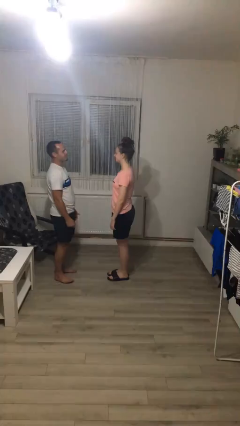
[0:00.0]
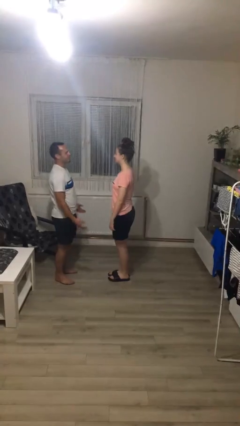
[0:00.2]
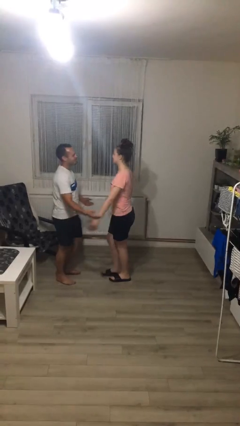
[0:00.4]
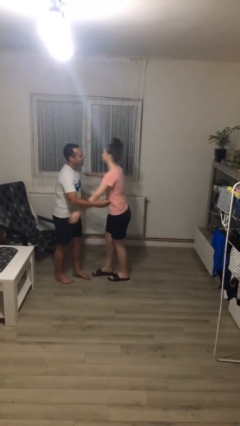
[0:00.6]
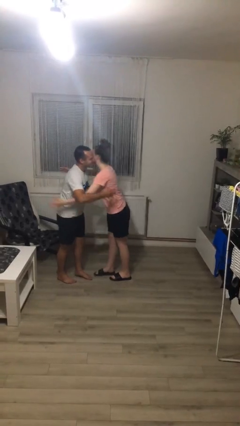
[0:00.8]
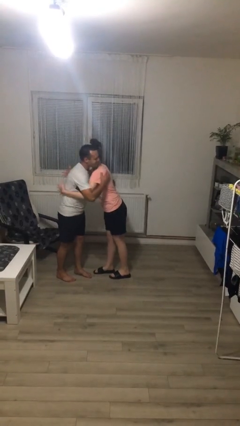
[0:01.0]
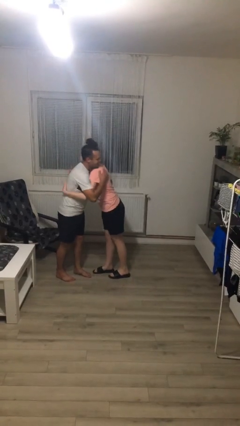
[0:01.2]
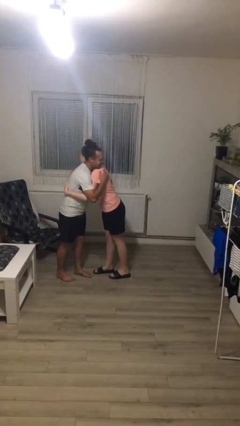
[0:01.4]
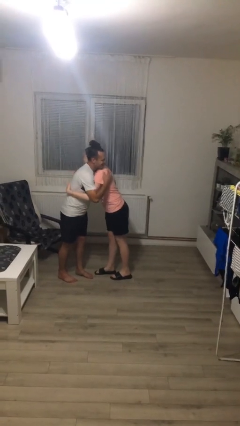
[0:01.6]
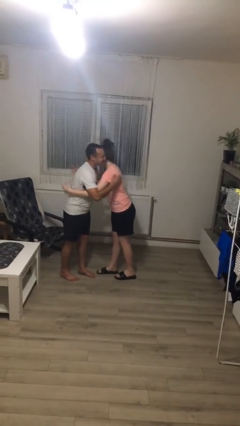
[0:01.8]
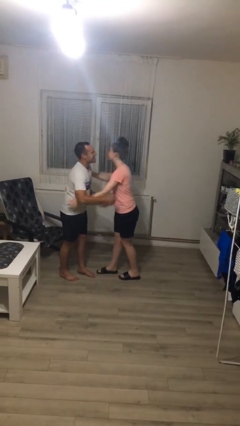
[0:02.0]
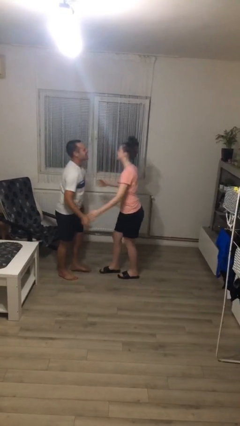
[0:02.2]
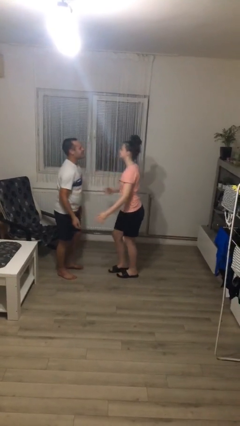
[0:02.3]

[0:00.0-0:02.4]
person embraces person

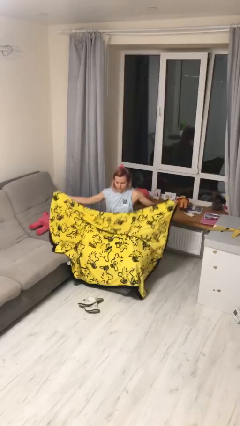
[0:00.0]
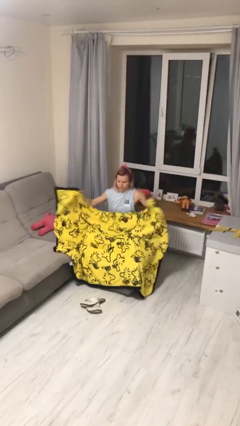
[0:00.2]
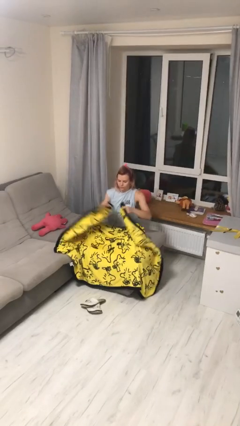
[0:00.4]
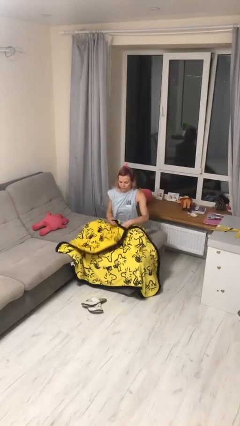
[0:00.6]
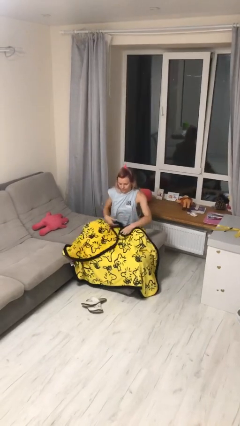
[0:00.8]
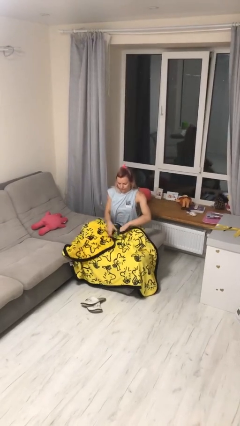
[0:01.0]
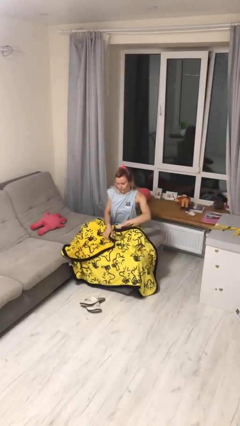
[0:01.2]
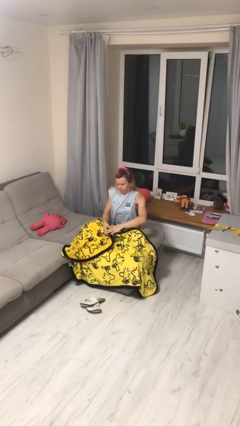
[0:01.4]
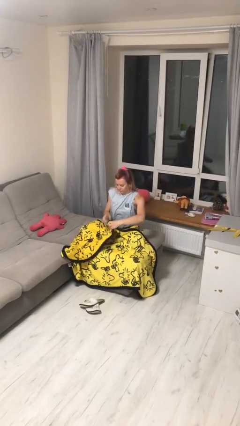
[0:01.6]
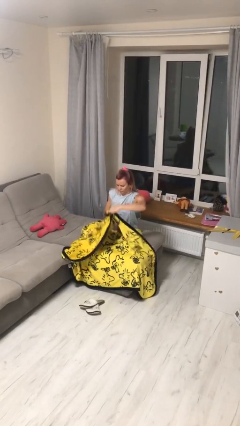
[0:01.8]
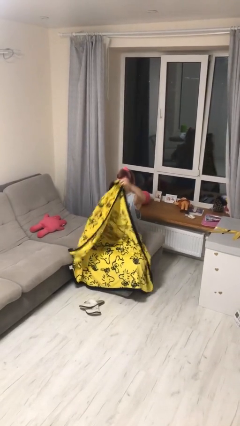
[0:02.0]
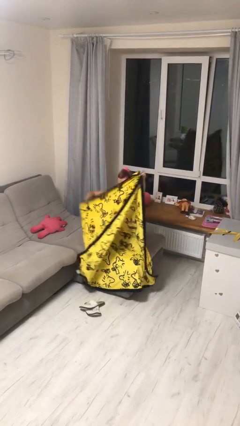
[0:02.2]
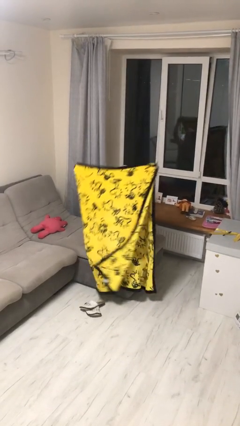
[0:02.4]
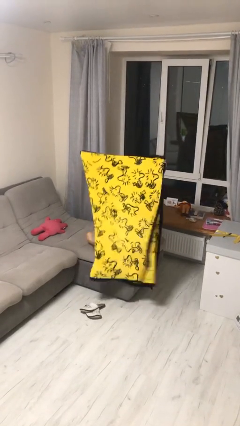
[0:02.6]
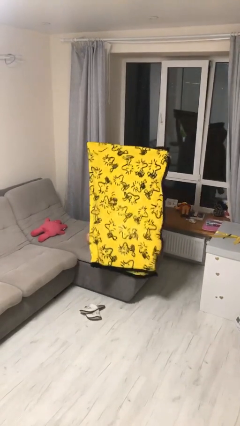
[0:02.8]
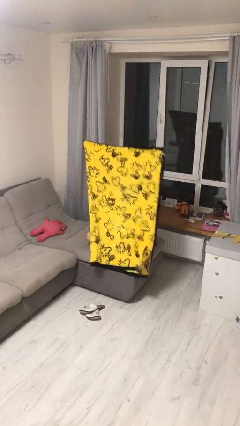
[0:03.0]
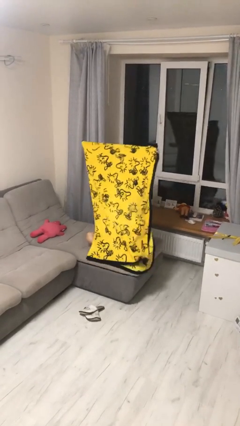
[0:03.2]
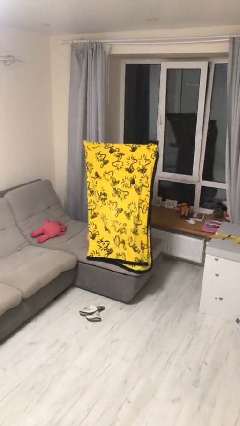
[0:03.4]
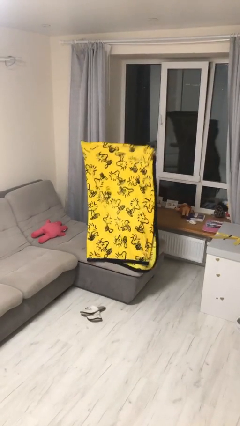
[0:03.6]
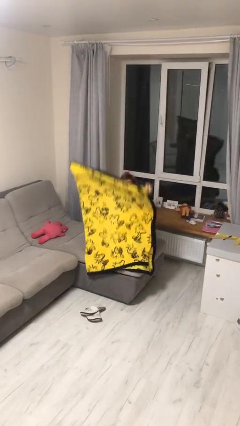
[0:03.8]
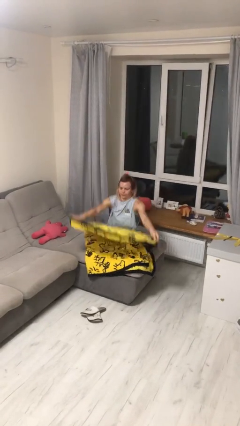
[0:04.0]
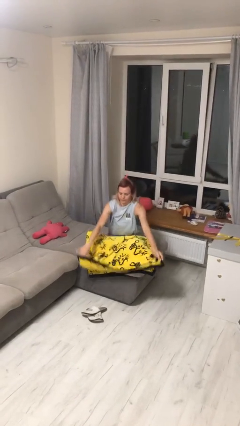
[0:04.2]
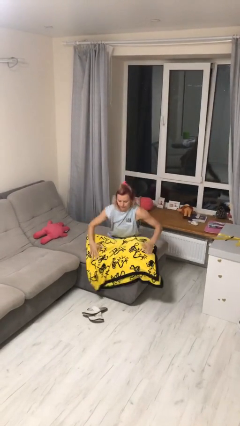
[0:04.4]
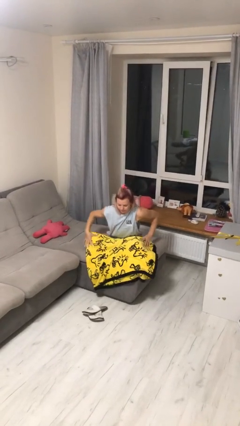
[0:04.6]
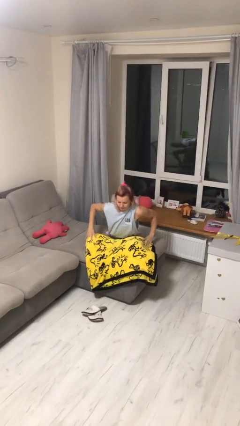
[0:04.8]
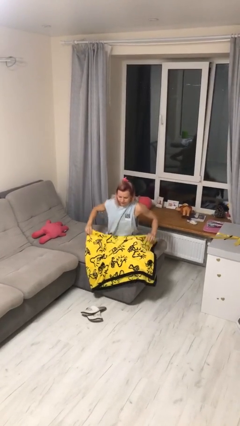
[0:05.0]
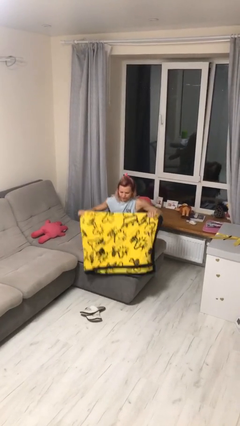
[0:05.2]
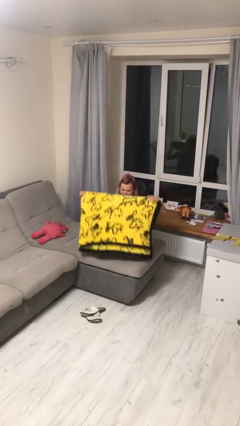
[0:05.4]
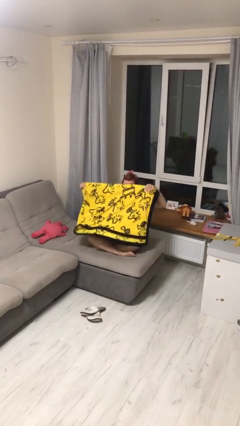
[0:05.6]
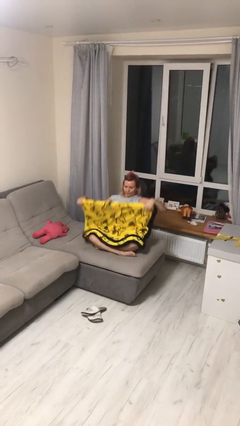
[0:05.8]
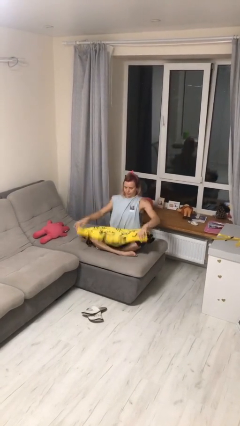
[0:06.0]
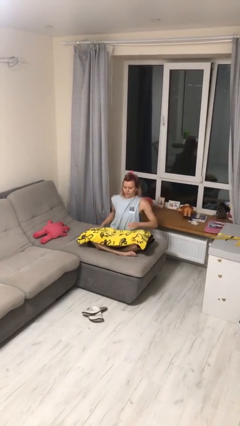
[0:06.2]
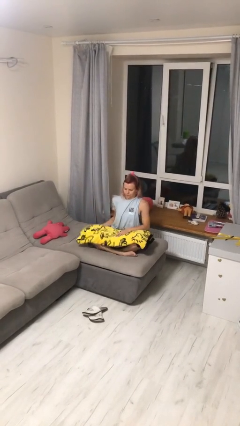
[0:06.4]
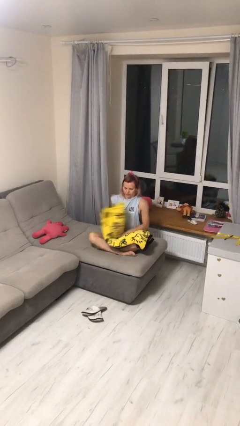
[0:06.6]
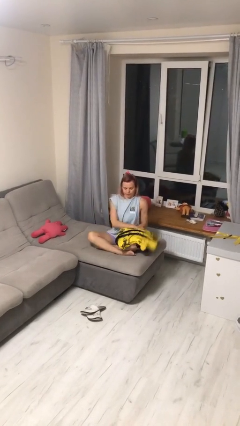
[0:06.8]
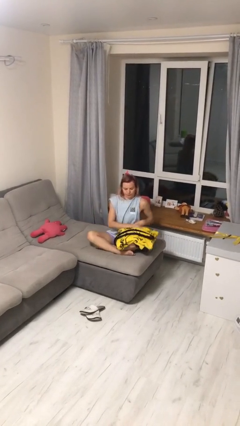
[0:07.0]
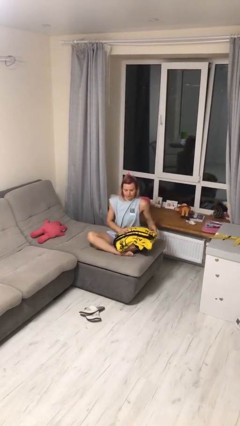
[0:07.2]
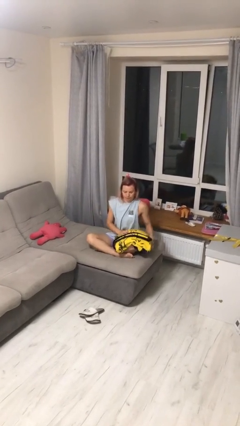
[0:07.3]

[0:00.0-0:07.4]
person folds blanket

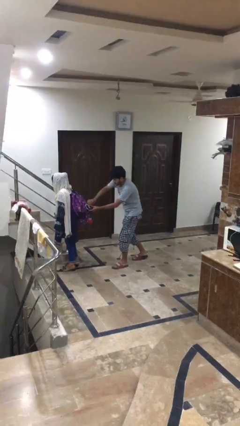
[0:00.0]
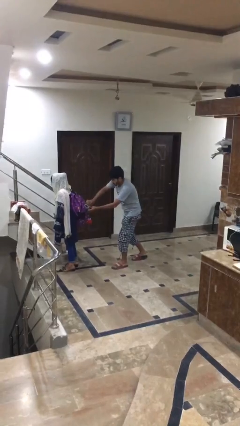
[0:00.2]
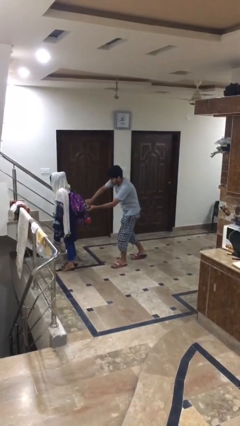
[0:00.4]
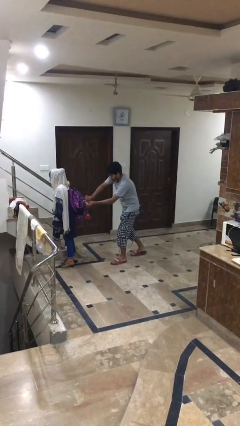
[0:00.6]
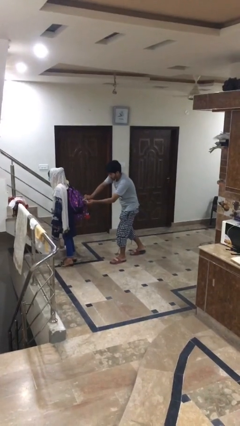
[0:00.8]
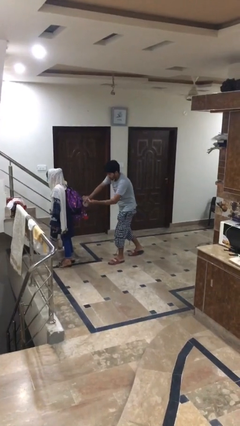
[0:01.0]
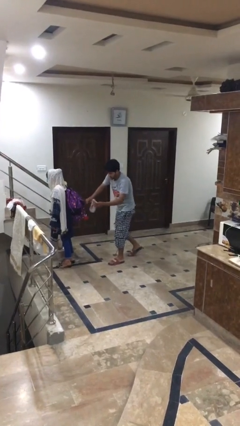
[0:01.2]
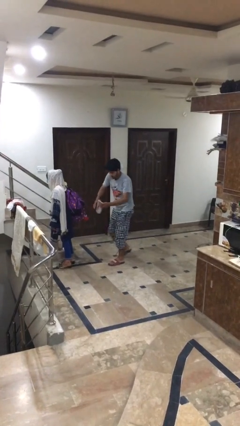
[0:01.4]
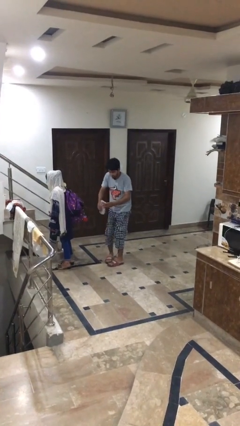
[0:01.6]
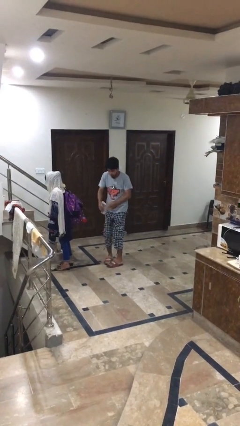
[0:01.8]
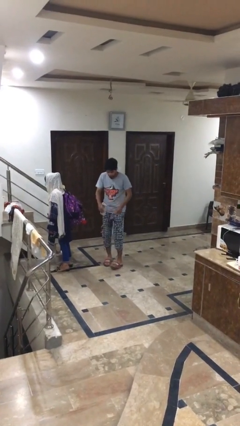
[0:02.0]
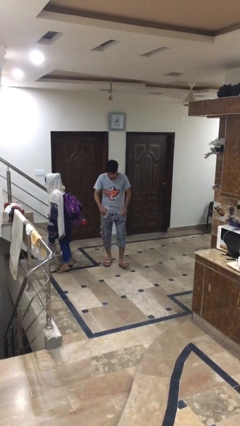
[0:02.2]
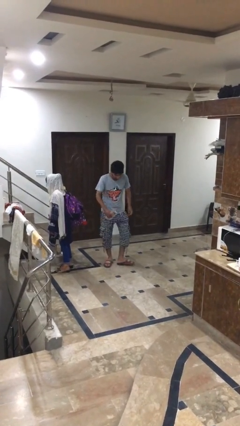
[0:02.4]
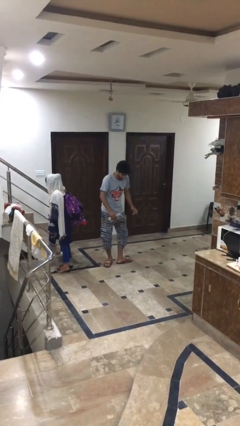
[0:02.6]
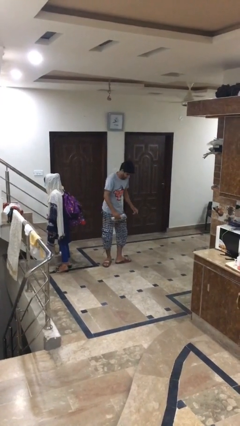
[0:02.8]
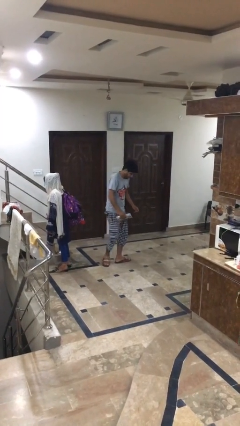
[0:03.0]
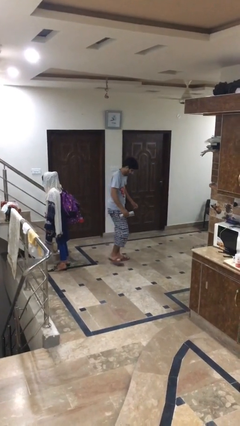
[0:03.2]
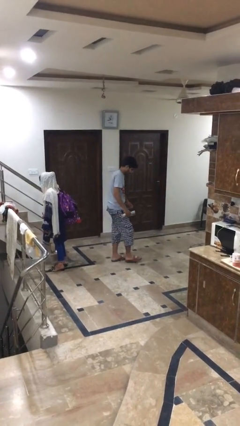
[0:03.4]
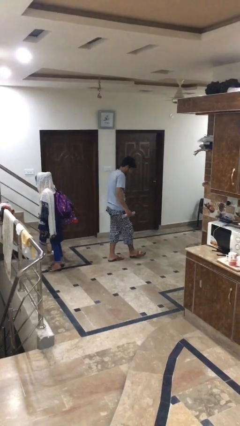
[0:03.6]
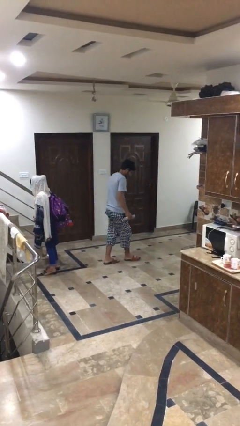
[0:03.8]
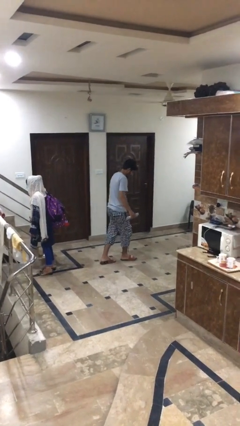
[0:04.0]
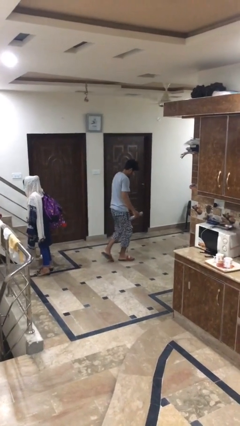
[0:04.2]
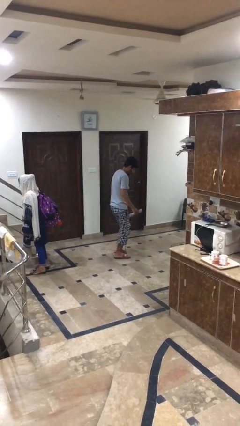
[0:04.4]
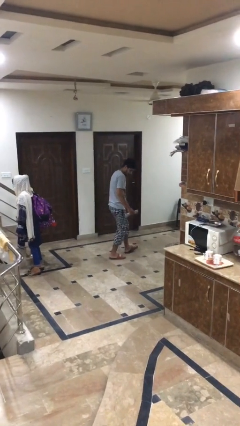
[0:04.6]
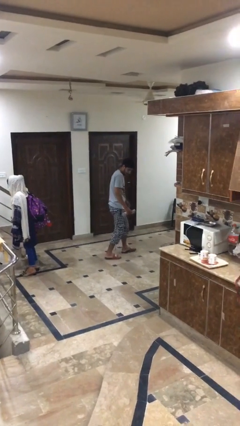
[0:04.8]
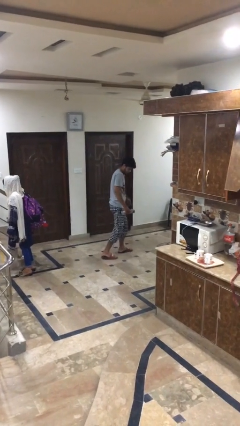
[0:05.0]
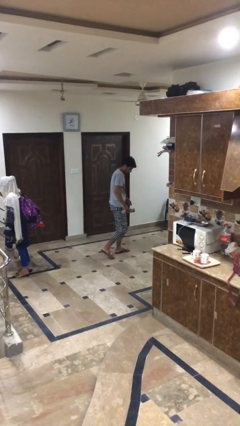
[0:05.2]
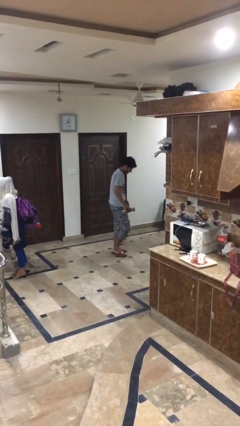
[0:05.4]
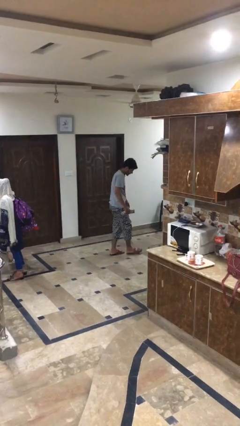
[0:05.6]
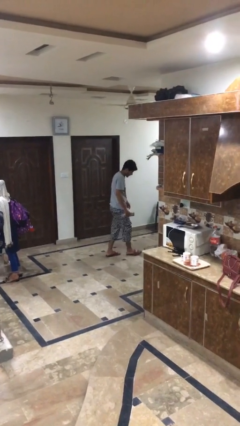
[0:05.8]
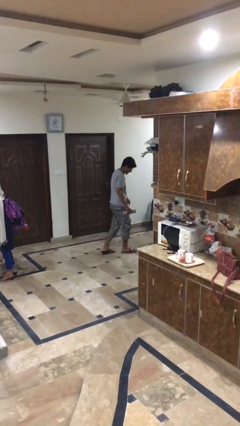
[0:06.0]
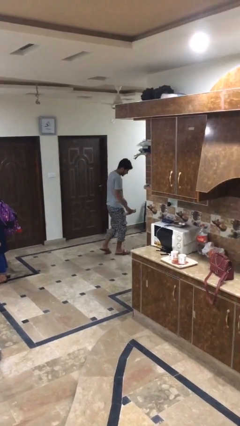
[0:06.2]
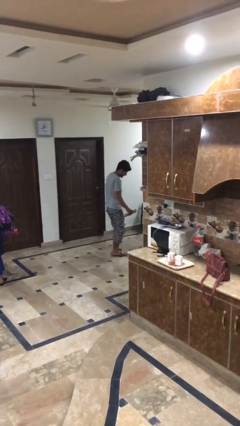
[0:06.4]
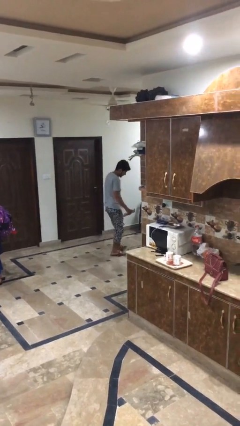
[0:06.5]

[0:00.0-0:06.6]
person steals object from person

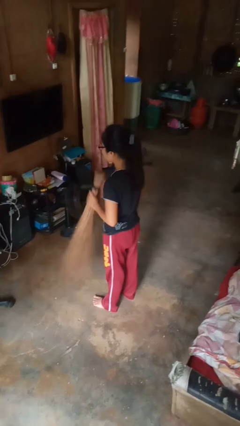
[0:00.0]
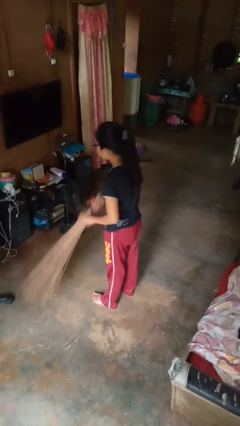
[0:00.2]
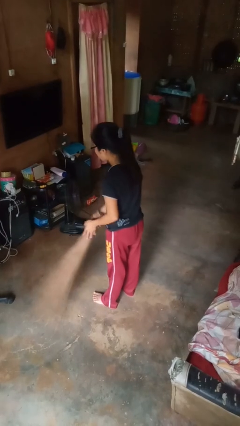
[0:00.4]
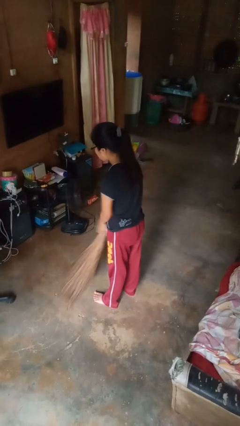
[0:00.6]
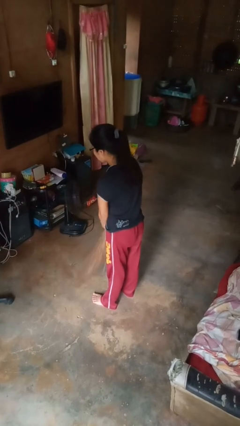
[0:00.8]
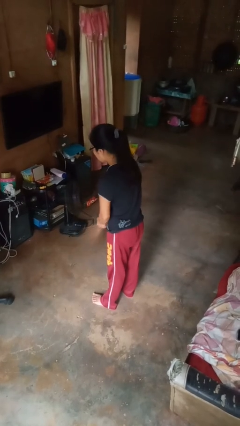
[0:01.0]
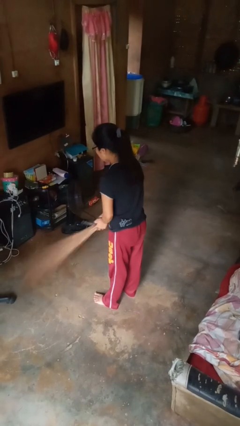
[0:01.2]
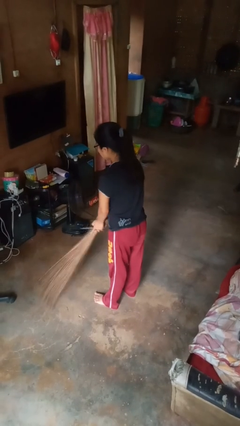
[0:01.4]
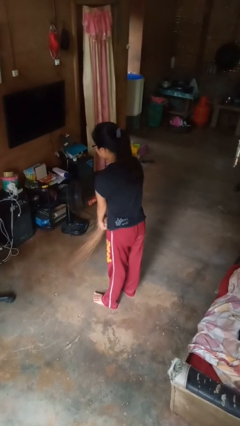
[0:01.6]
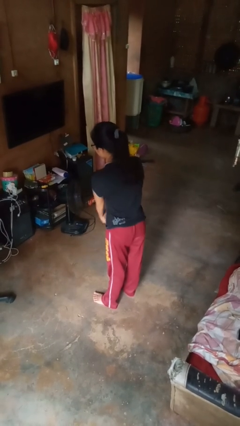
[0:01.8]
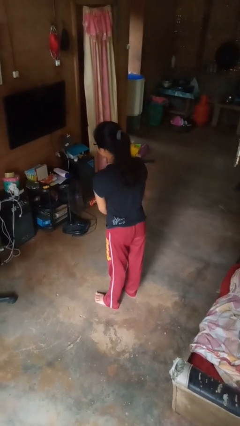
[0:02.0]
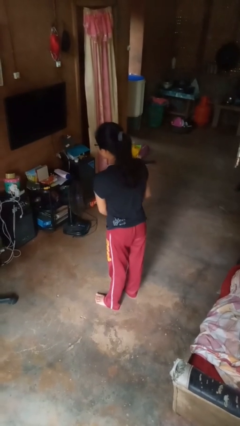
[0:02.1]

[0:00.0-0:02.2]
person sweeps floor
